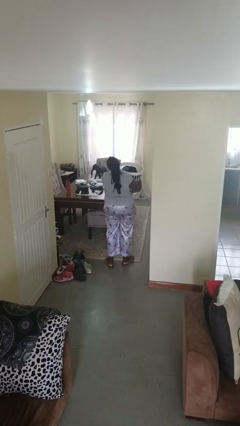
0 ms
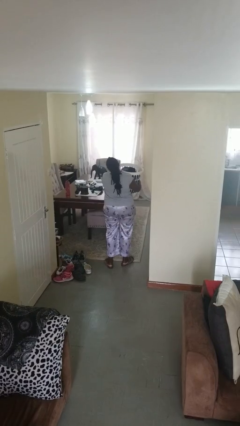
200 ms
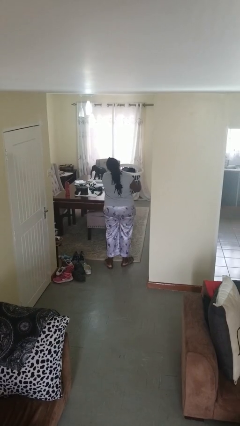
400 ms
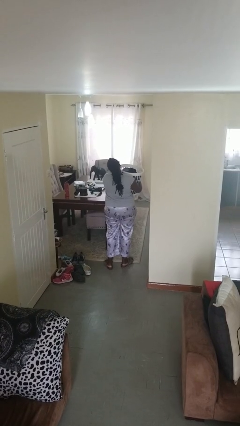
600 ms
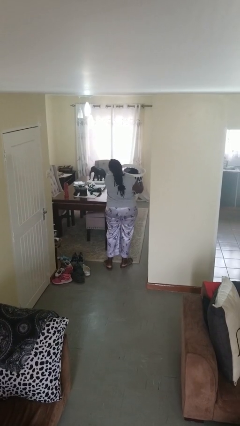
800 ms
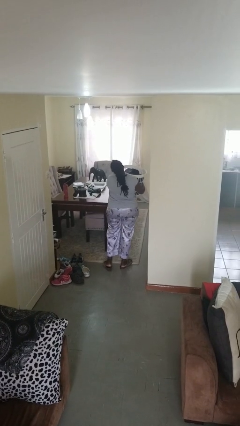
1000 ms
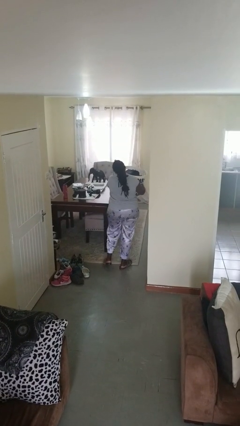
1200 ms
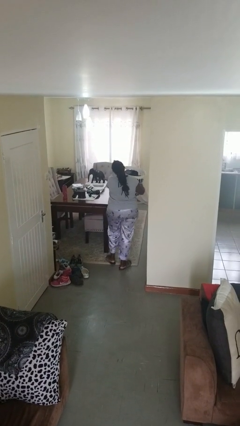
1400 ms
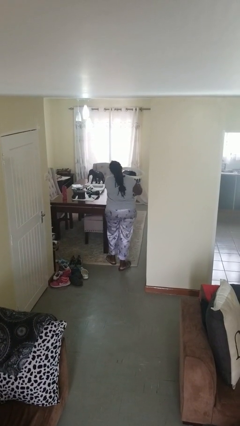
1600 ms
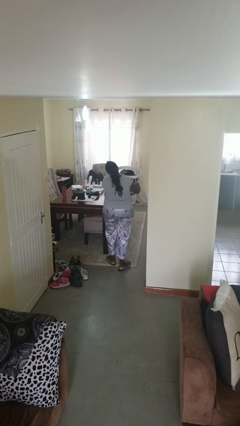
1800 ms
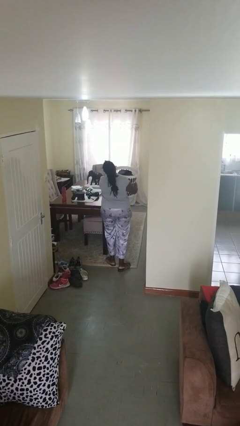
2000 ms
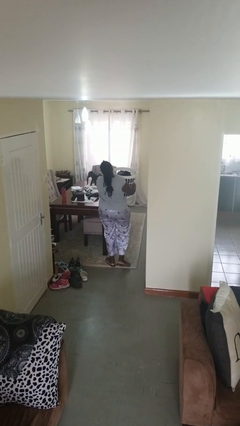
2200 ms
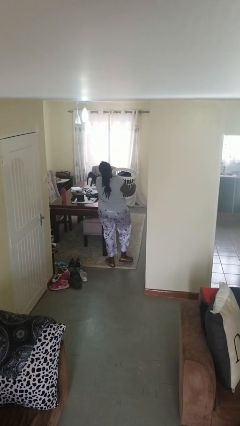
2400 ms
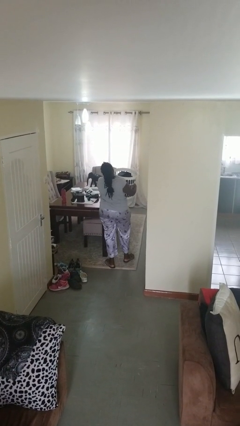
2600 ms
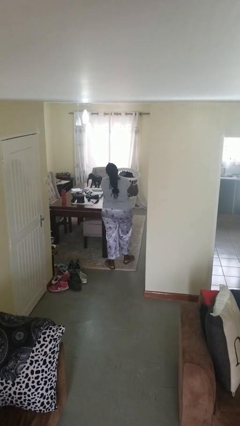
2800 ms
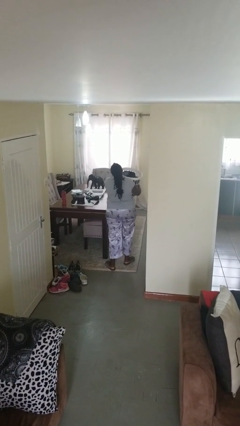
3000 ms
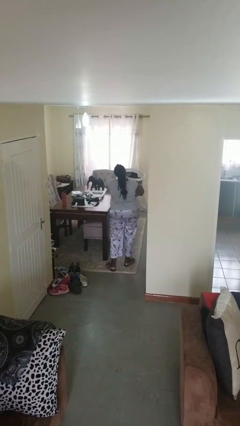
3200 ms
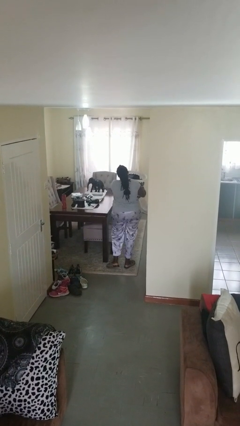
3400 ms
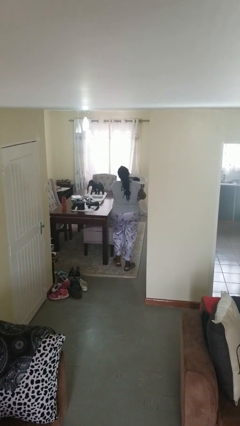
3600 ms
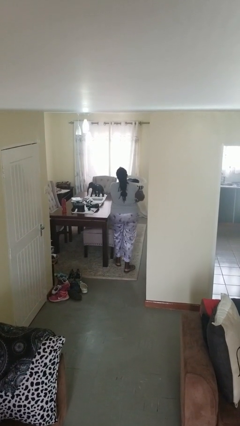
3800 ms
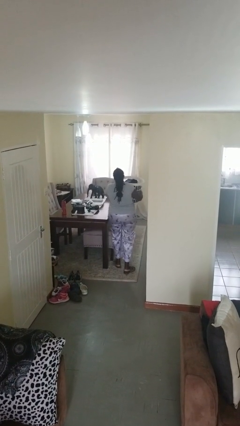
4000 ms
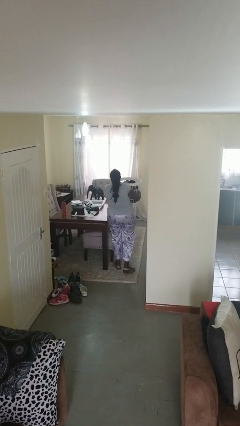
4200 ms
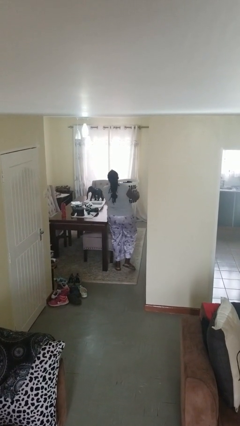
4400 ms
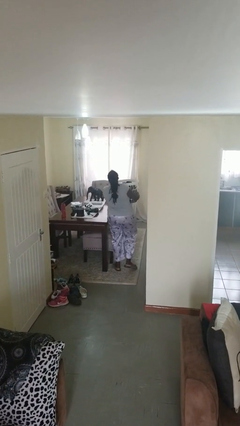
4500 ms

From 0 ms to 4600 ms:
person carries laundry basket

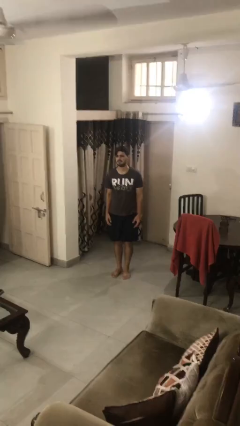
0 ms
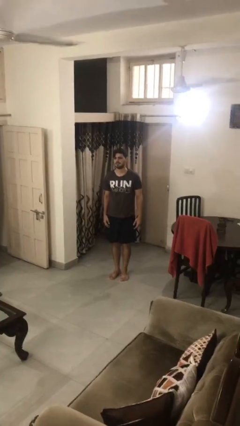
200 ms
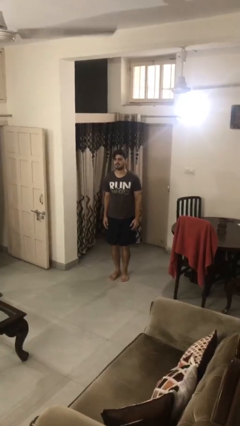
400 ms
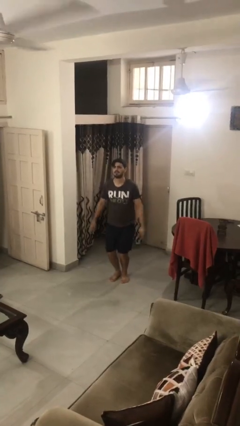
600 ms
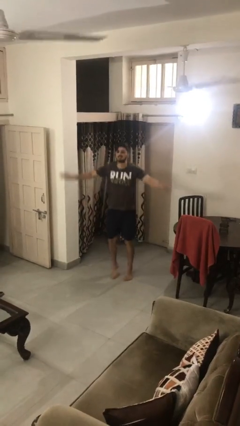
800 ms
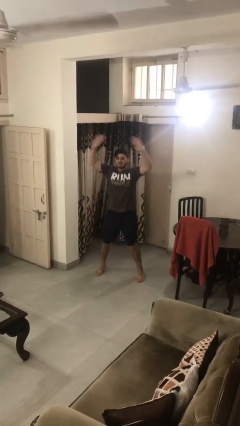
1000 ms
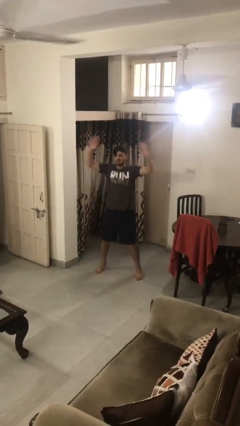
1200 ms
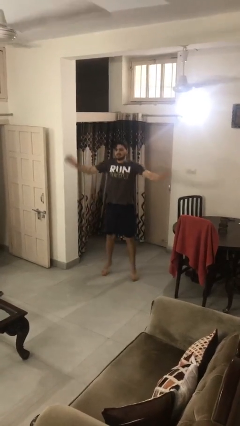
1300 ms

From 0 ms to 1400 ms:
person exercises with jumping jacks

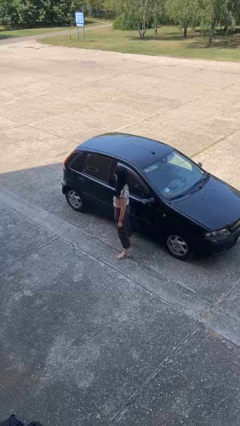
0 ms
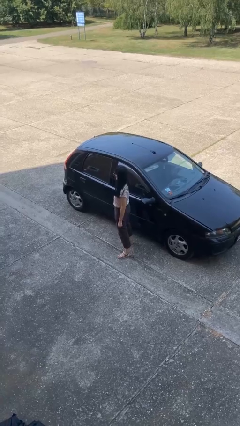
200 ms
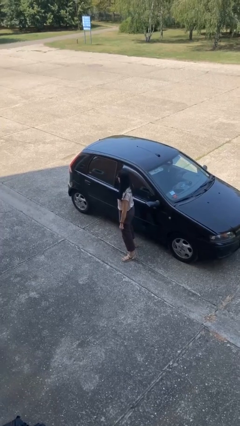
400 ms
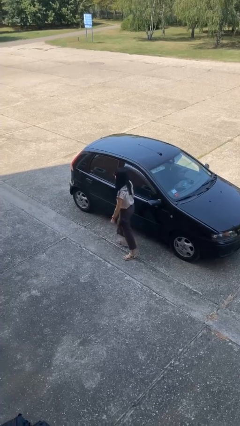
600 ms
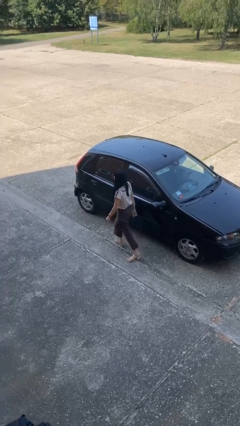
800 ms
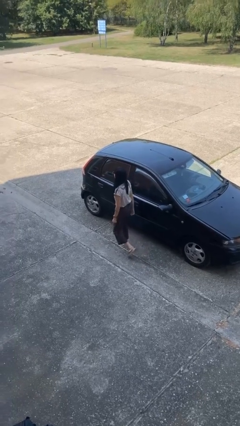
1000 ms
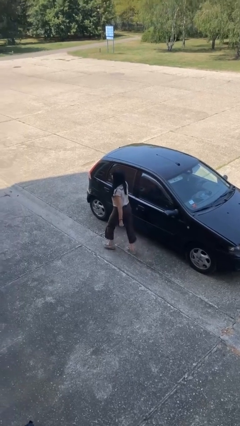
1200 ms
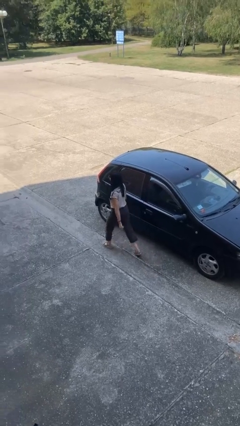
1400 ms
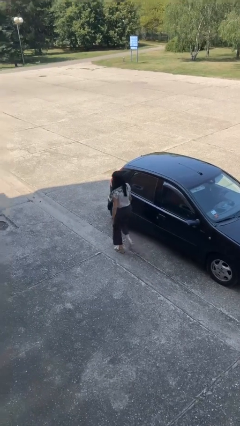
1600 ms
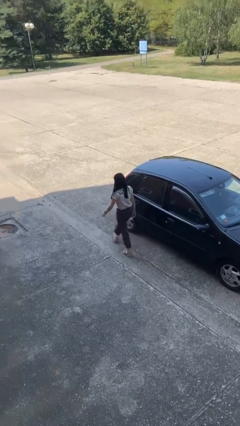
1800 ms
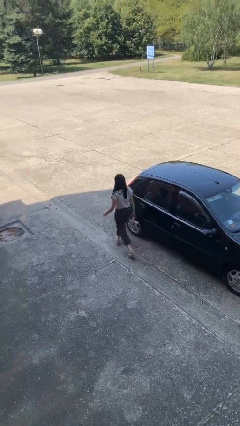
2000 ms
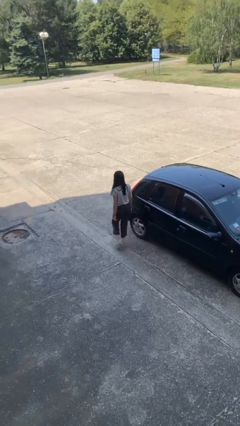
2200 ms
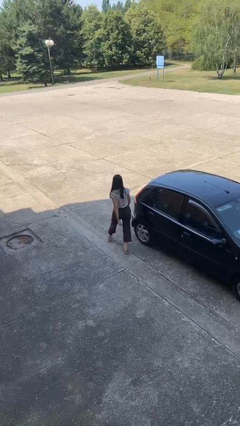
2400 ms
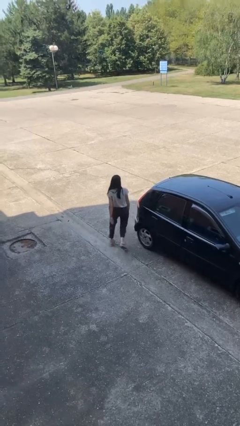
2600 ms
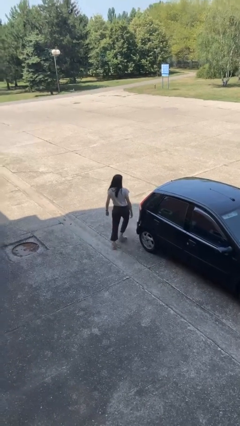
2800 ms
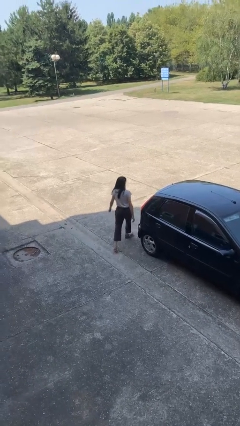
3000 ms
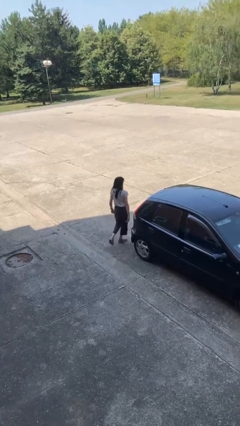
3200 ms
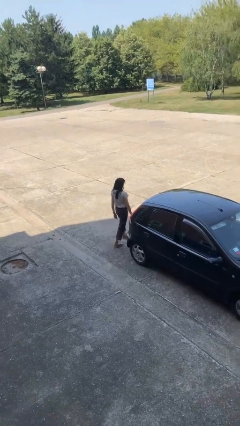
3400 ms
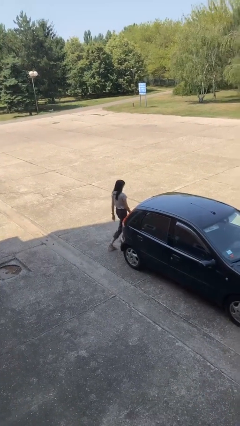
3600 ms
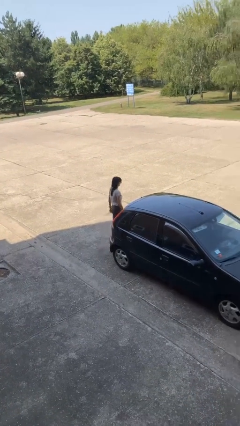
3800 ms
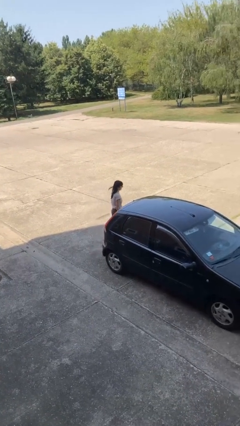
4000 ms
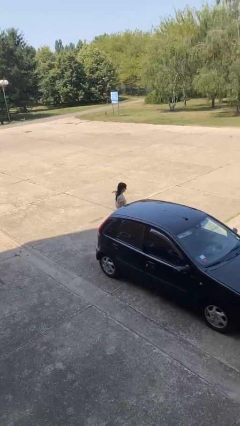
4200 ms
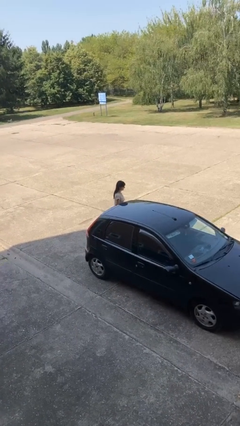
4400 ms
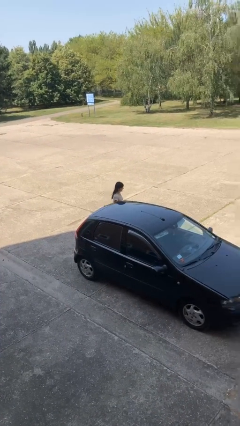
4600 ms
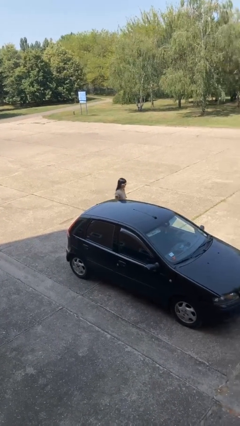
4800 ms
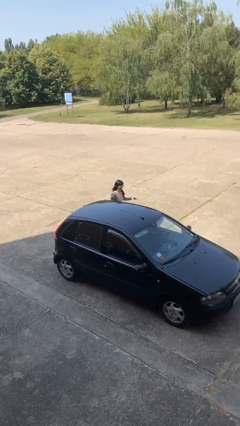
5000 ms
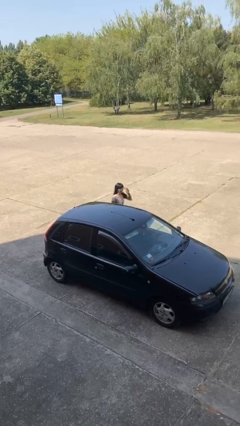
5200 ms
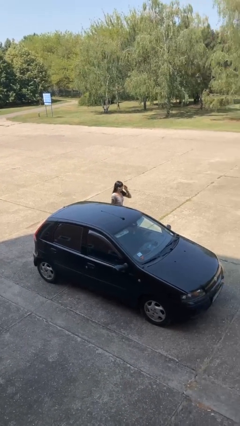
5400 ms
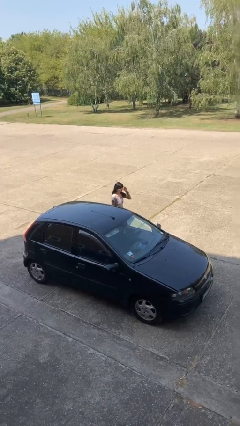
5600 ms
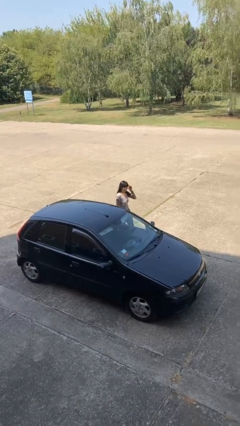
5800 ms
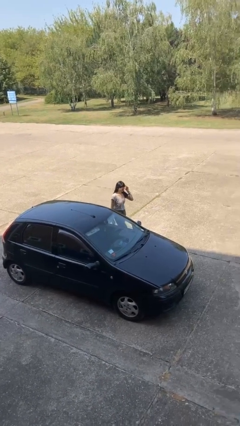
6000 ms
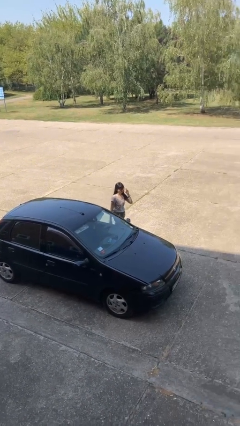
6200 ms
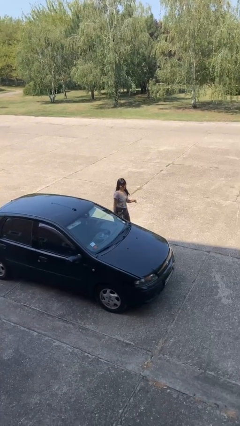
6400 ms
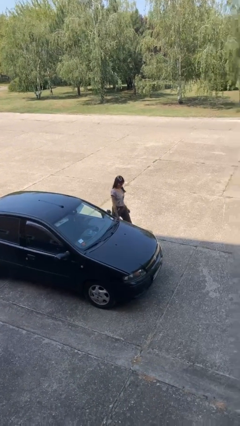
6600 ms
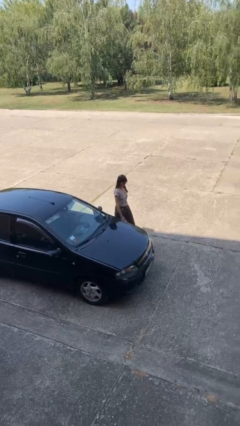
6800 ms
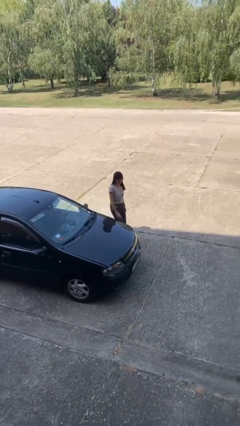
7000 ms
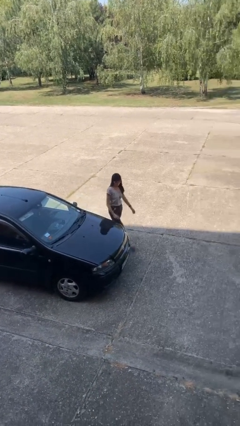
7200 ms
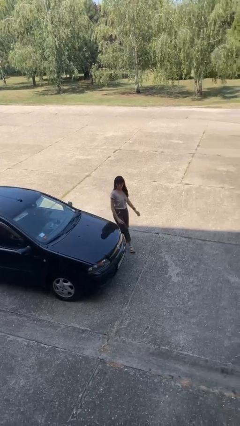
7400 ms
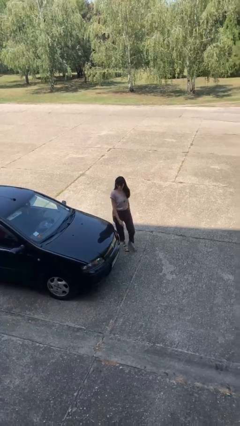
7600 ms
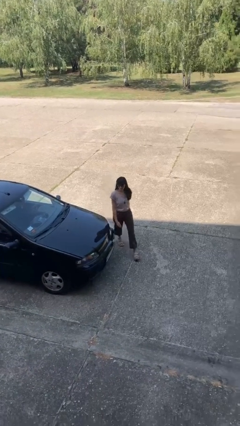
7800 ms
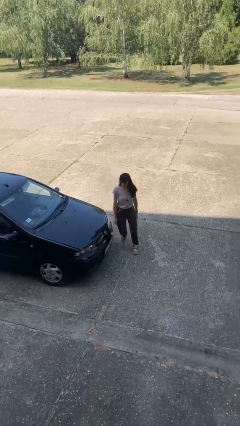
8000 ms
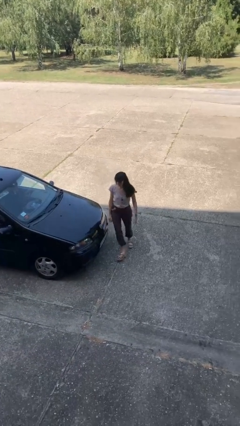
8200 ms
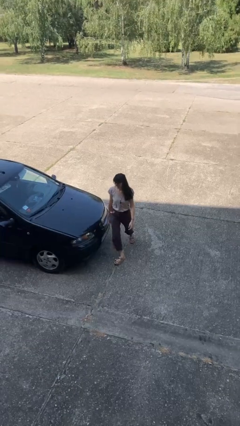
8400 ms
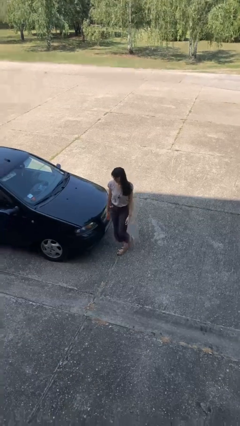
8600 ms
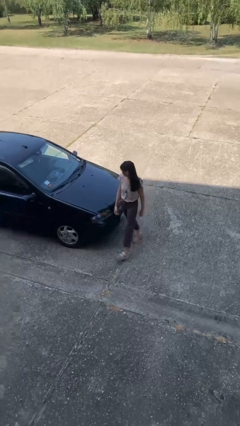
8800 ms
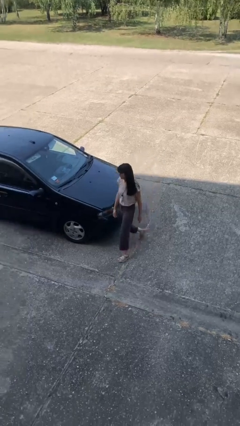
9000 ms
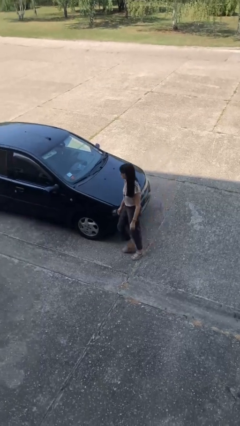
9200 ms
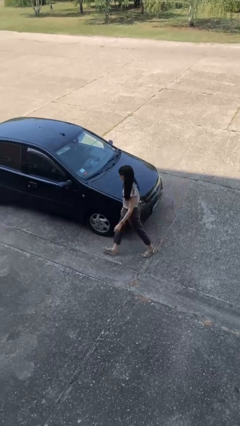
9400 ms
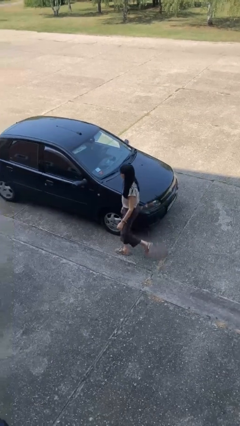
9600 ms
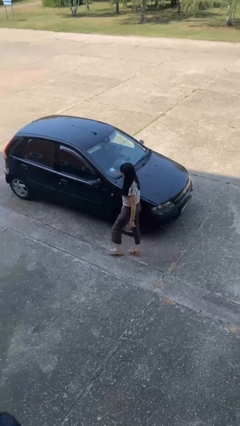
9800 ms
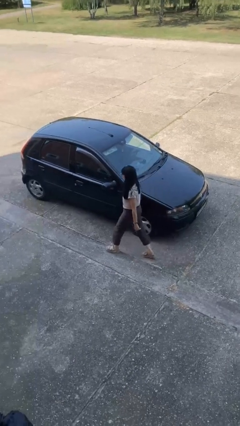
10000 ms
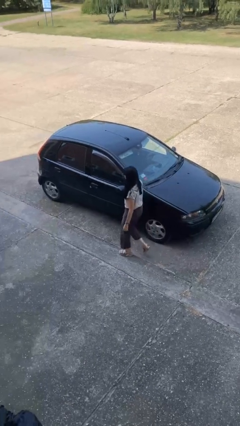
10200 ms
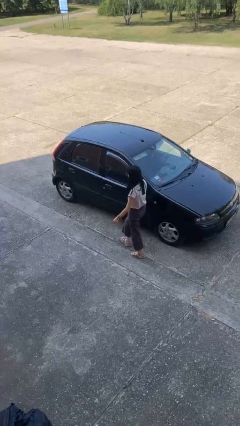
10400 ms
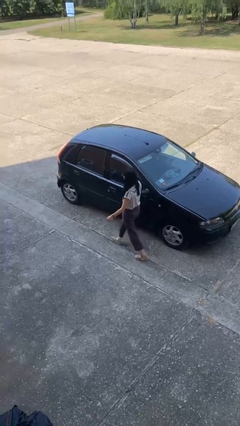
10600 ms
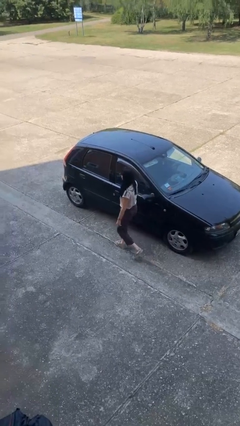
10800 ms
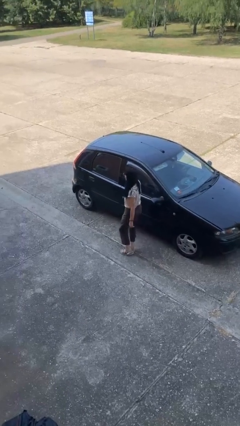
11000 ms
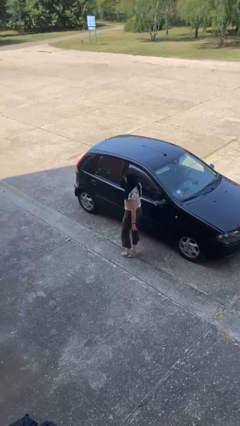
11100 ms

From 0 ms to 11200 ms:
person walks around car

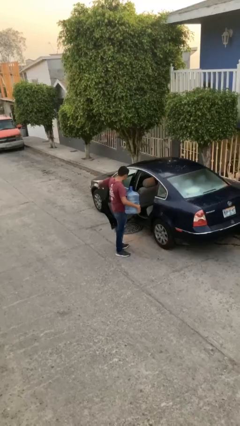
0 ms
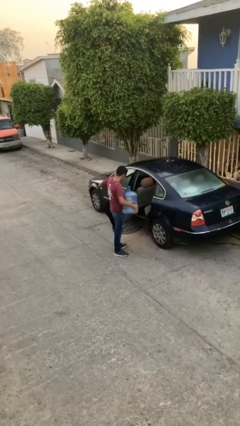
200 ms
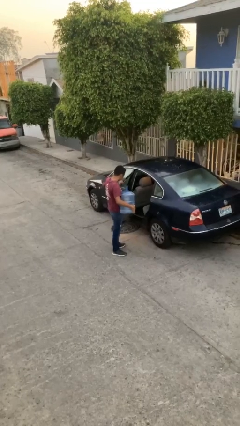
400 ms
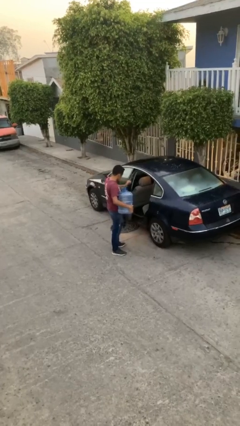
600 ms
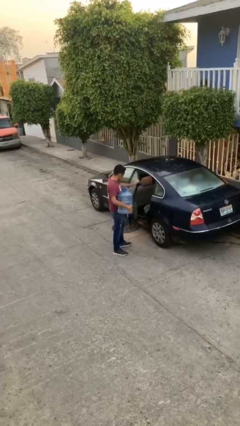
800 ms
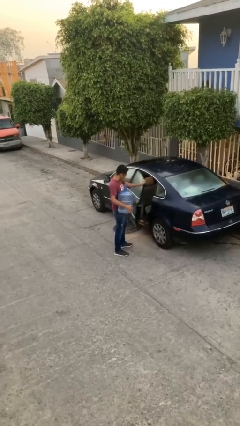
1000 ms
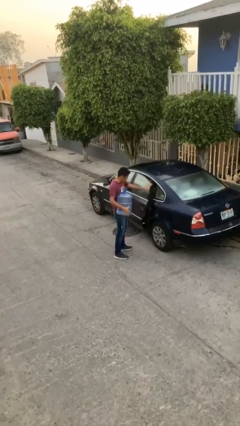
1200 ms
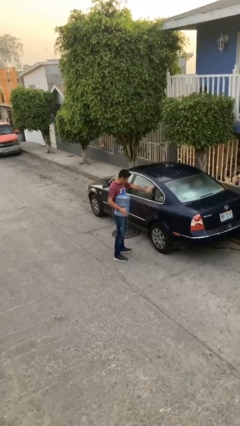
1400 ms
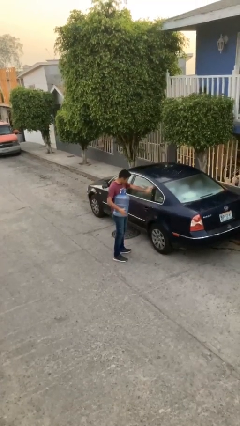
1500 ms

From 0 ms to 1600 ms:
person closes car door
